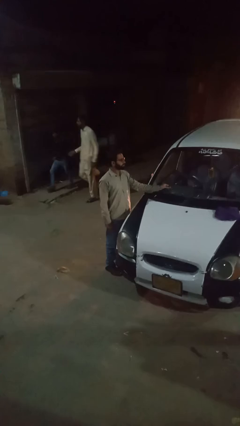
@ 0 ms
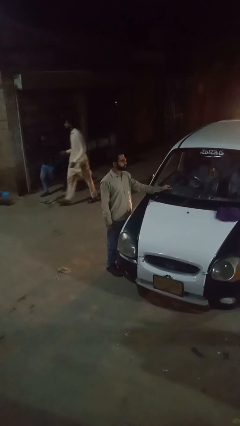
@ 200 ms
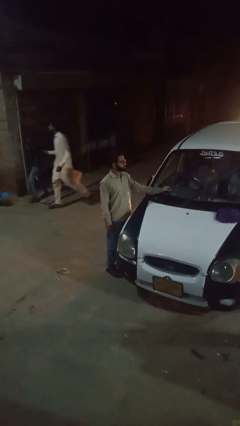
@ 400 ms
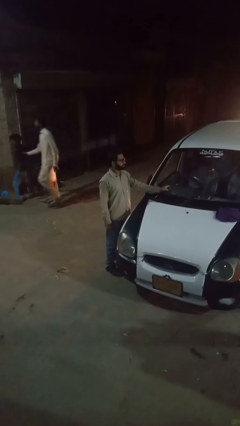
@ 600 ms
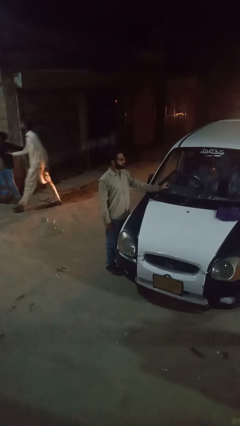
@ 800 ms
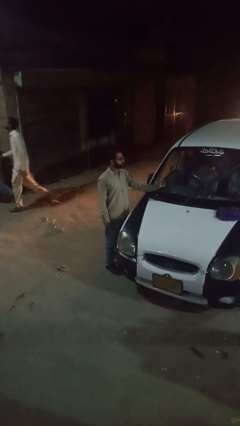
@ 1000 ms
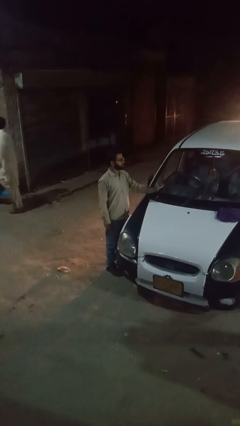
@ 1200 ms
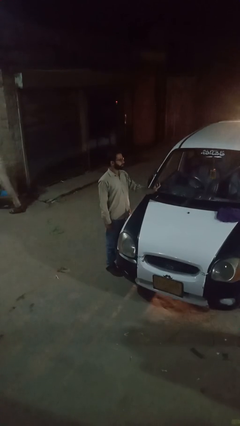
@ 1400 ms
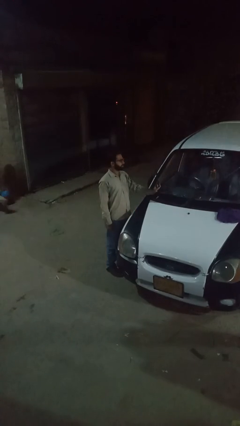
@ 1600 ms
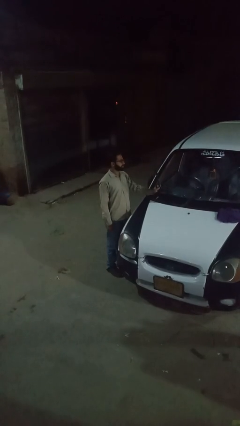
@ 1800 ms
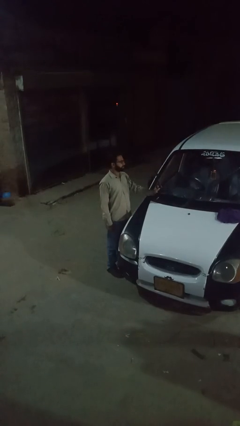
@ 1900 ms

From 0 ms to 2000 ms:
person flips up car wipers

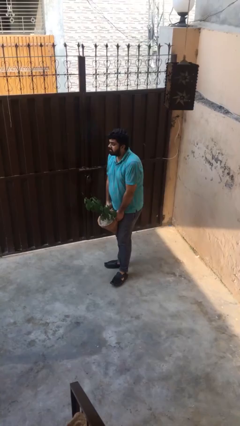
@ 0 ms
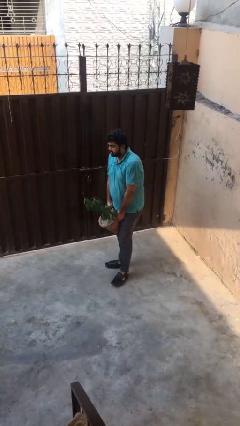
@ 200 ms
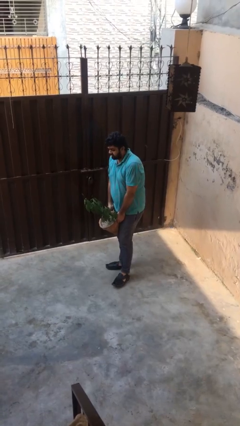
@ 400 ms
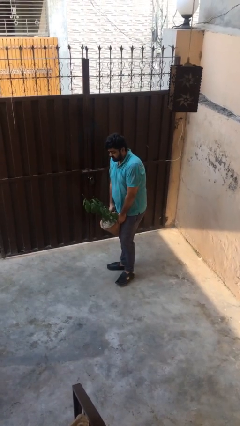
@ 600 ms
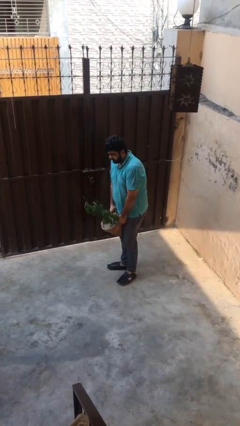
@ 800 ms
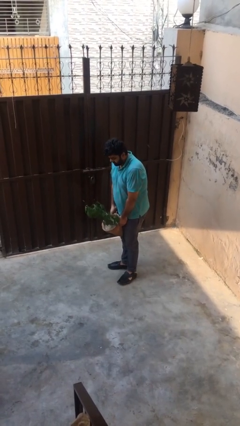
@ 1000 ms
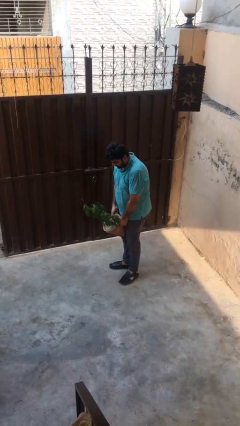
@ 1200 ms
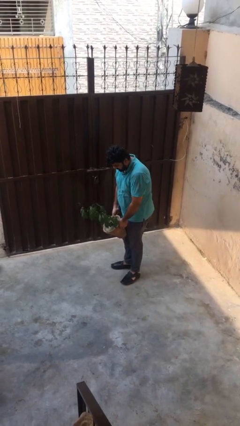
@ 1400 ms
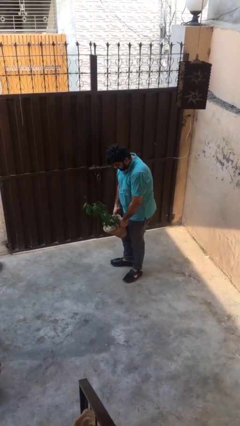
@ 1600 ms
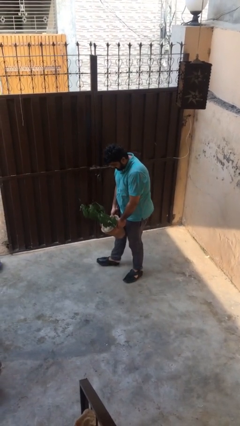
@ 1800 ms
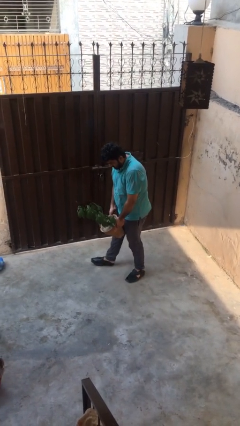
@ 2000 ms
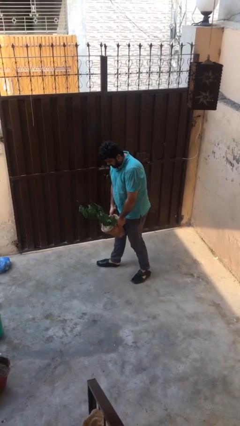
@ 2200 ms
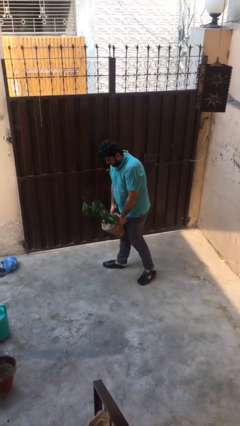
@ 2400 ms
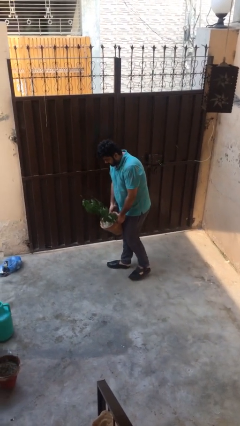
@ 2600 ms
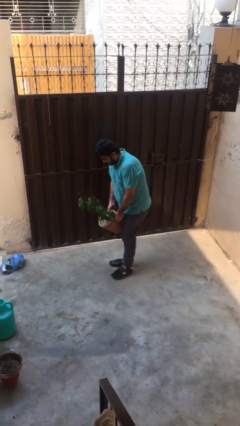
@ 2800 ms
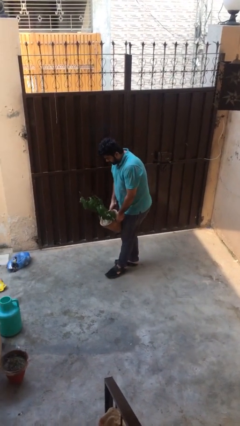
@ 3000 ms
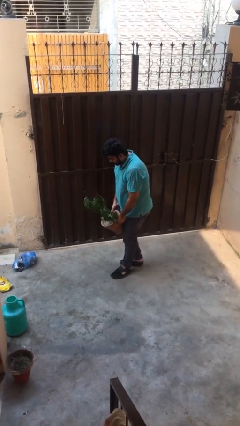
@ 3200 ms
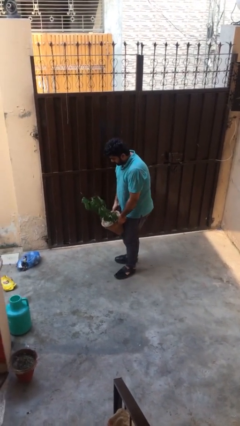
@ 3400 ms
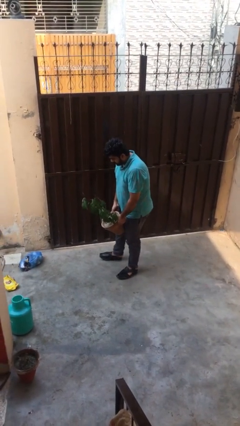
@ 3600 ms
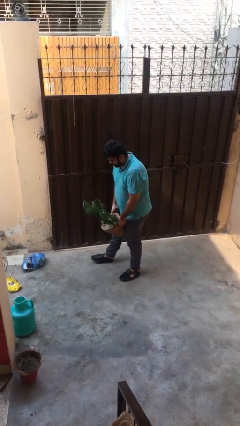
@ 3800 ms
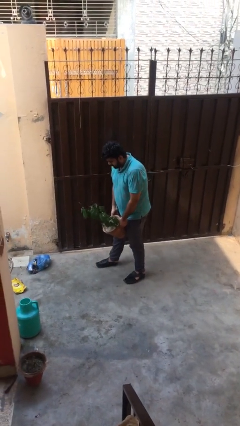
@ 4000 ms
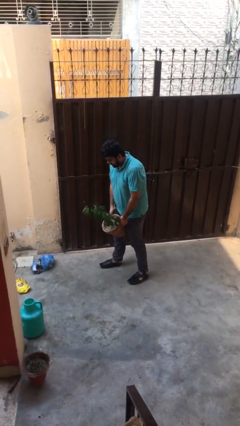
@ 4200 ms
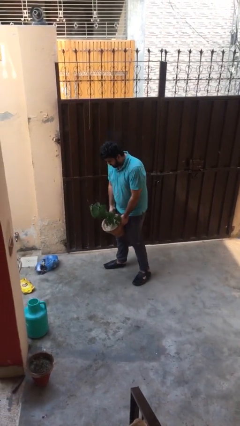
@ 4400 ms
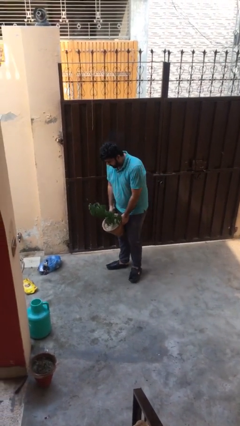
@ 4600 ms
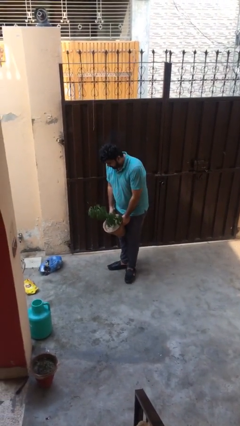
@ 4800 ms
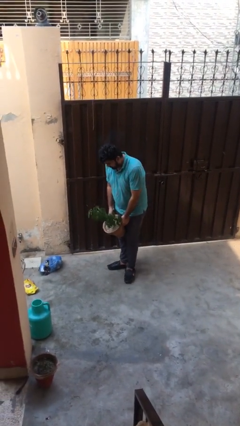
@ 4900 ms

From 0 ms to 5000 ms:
person carries heavy object

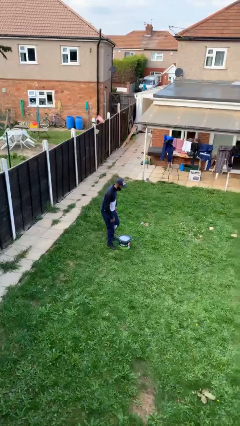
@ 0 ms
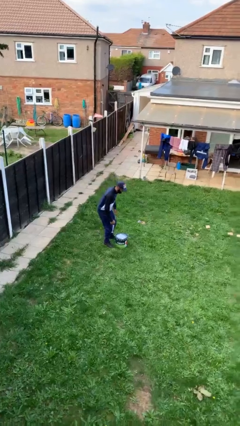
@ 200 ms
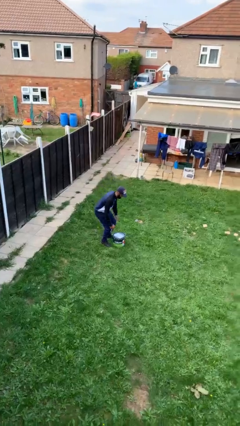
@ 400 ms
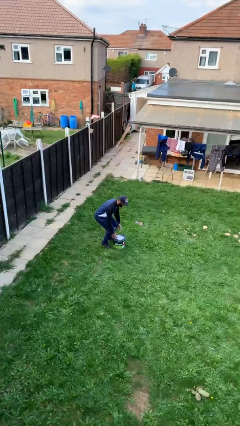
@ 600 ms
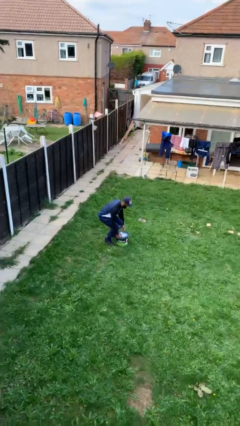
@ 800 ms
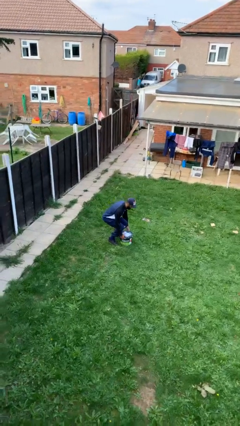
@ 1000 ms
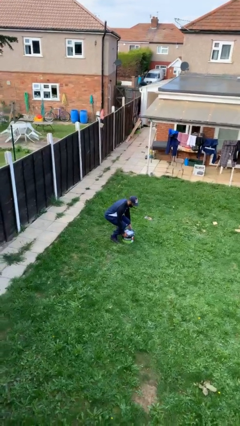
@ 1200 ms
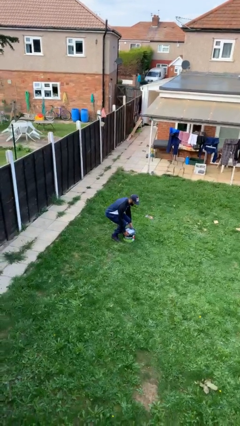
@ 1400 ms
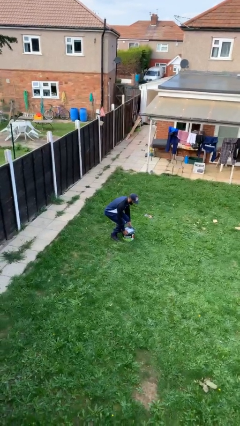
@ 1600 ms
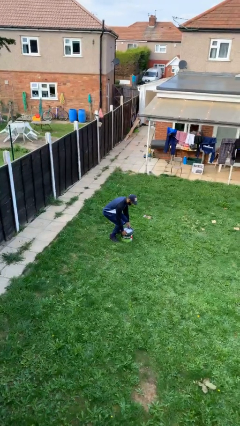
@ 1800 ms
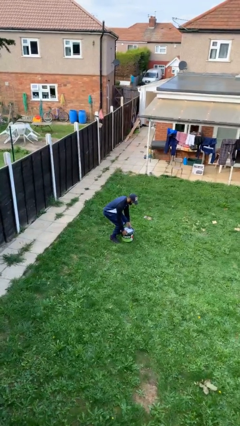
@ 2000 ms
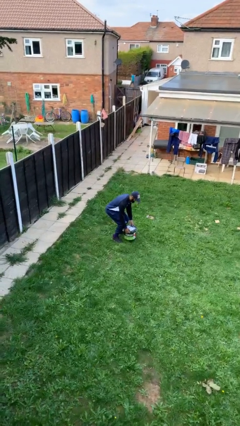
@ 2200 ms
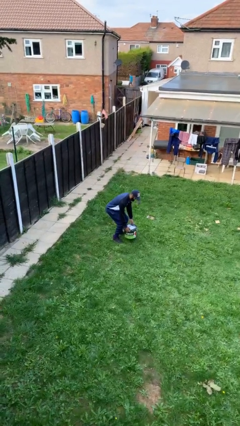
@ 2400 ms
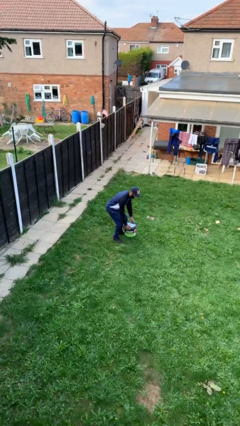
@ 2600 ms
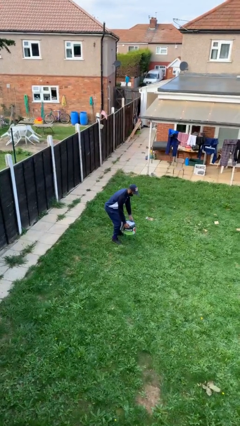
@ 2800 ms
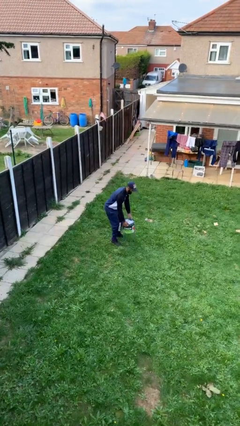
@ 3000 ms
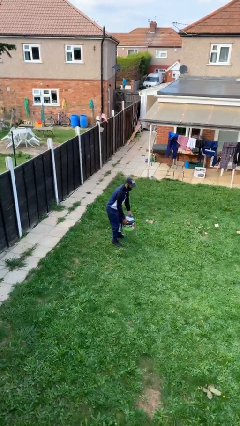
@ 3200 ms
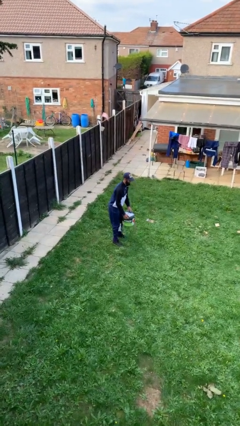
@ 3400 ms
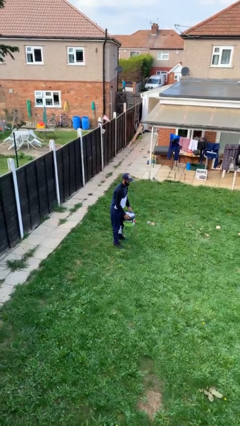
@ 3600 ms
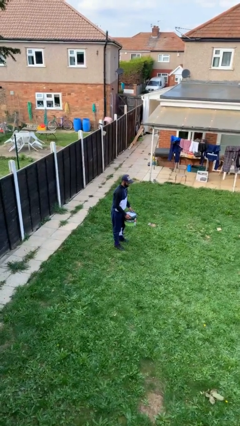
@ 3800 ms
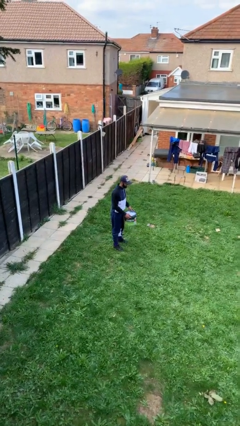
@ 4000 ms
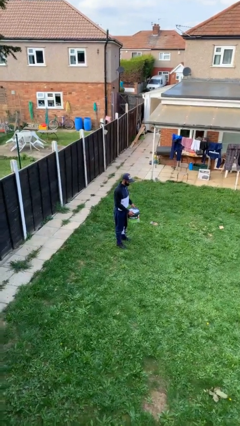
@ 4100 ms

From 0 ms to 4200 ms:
person picks up object from floor

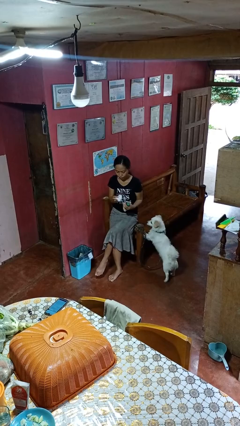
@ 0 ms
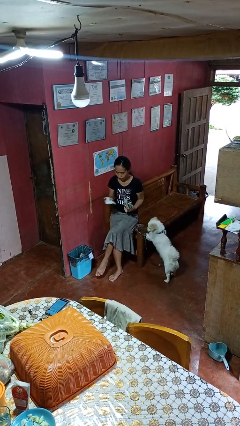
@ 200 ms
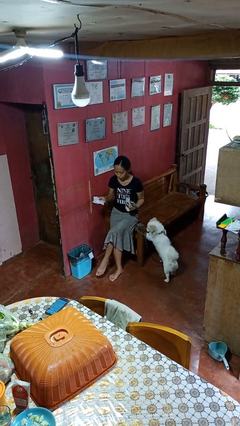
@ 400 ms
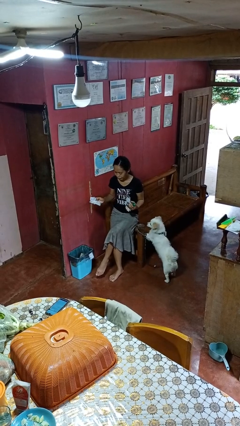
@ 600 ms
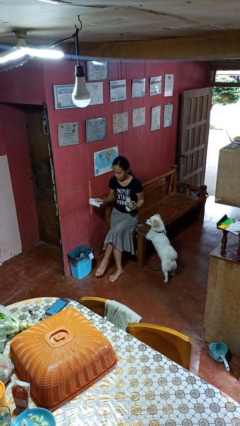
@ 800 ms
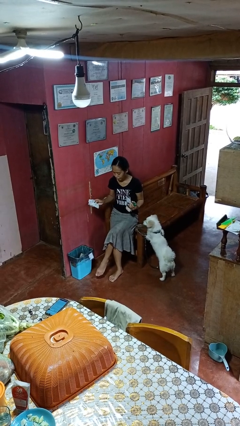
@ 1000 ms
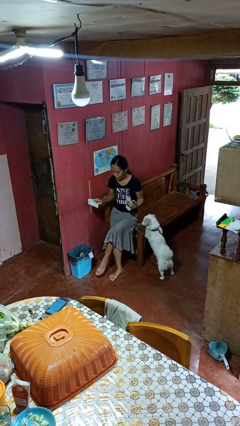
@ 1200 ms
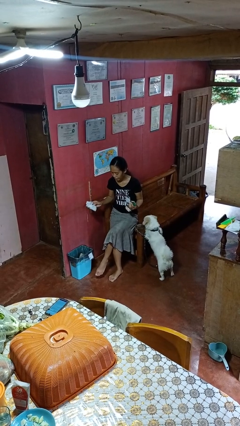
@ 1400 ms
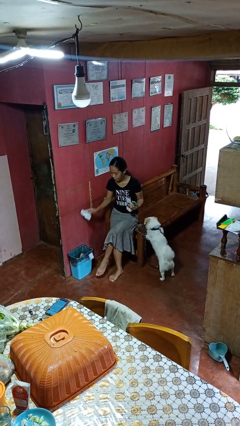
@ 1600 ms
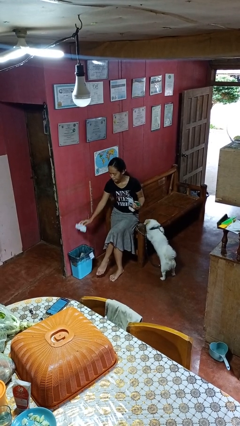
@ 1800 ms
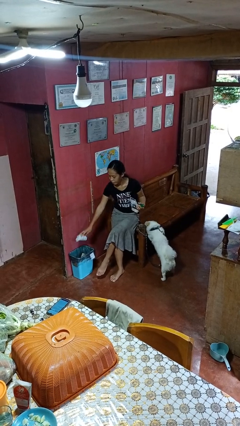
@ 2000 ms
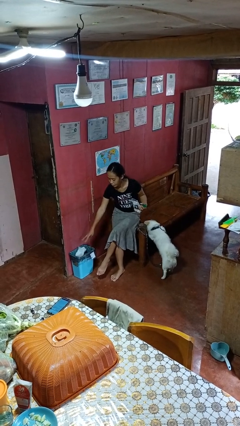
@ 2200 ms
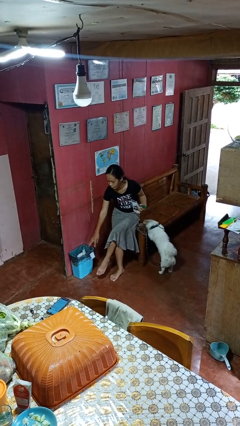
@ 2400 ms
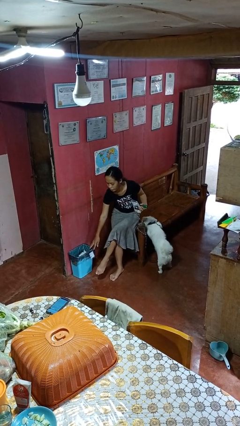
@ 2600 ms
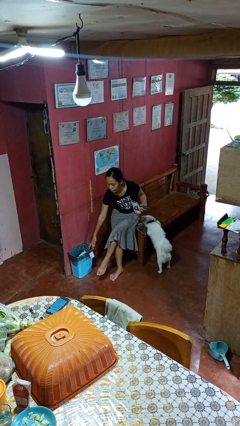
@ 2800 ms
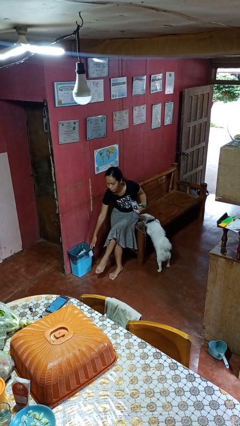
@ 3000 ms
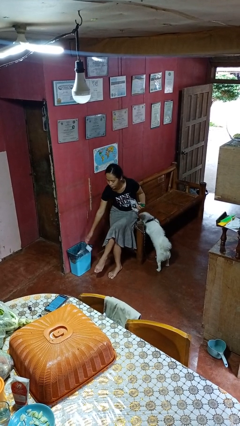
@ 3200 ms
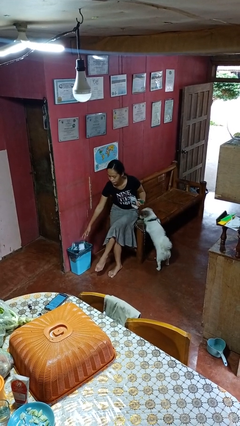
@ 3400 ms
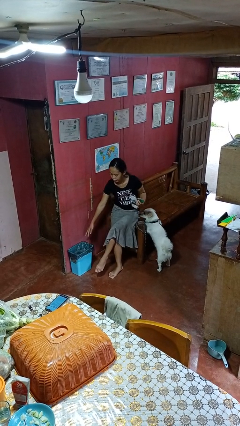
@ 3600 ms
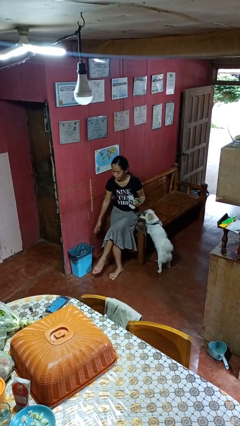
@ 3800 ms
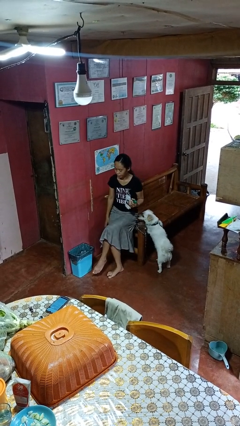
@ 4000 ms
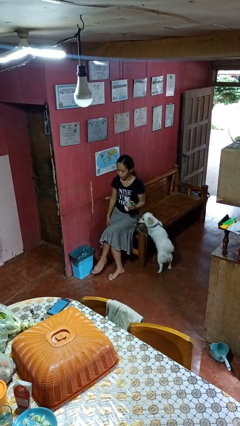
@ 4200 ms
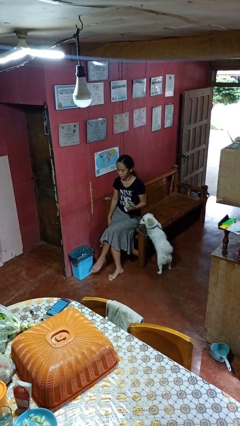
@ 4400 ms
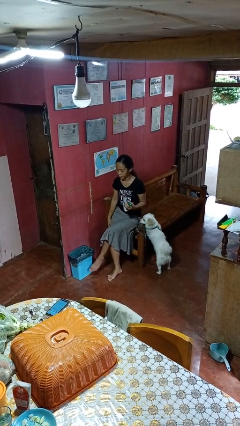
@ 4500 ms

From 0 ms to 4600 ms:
person discards trash

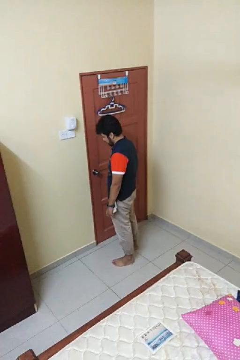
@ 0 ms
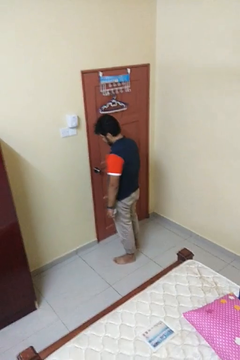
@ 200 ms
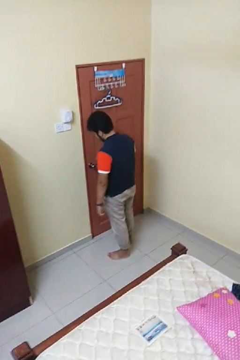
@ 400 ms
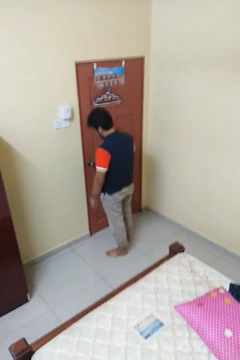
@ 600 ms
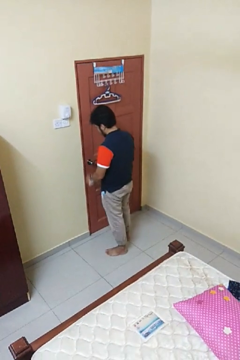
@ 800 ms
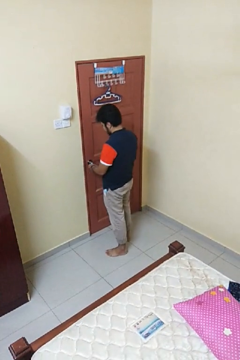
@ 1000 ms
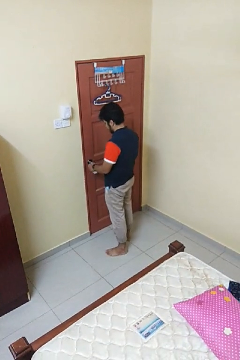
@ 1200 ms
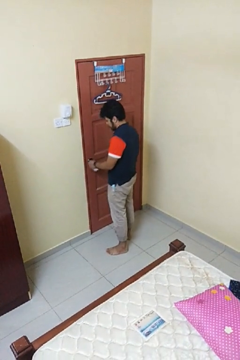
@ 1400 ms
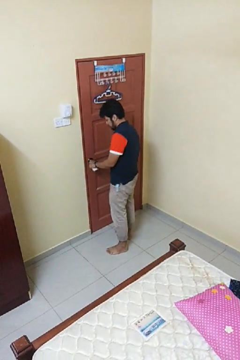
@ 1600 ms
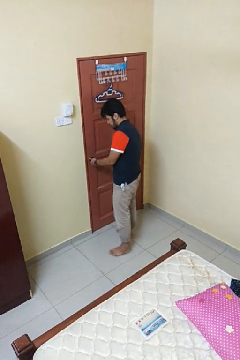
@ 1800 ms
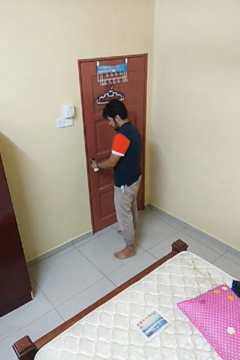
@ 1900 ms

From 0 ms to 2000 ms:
person unlocks door with keys
